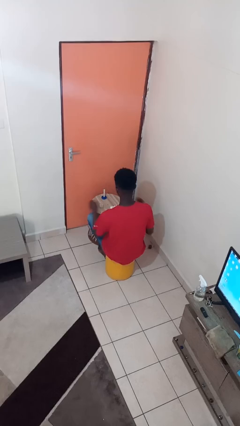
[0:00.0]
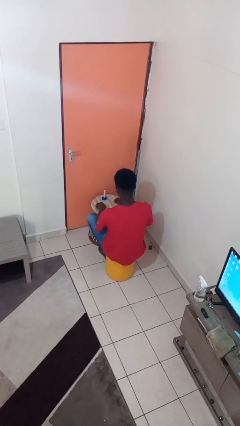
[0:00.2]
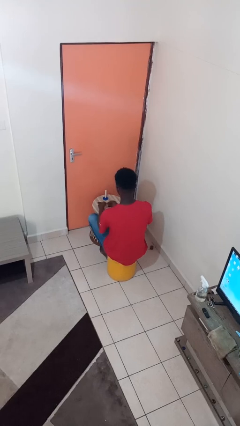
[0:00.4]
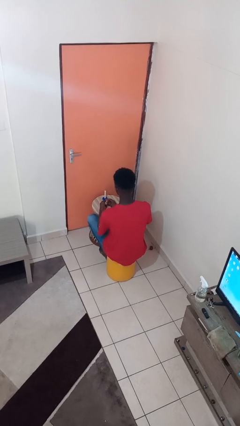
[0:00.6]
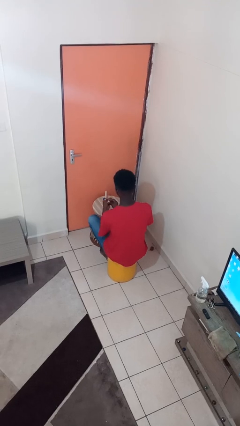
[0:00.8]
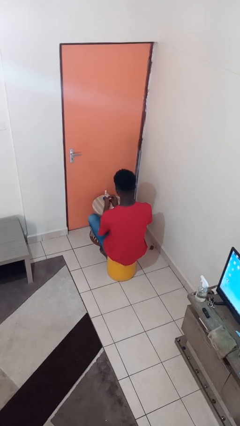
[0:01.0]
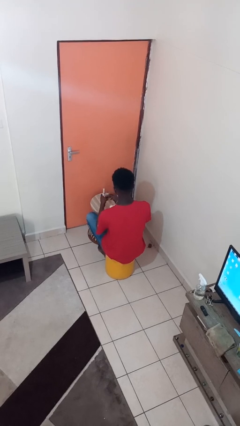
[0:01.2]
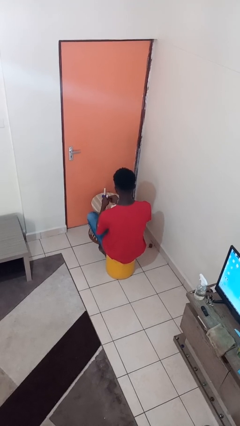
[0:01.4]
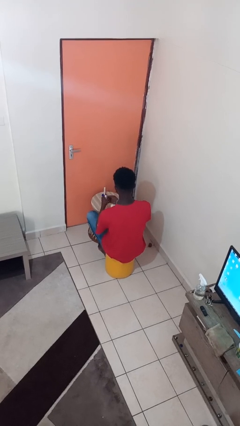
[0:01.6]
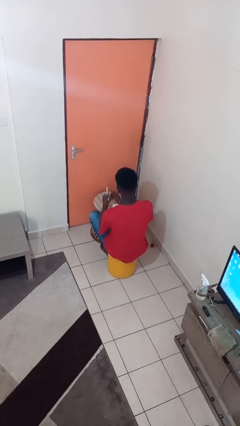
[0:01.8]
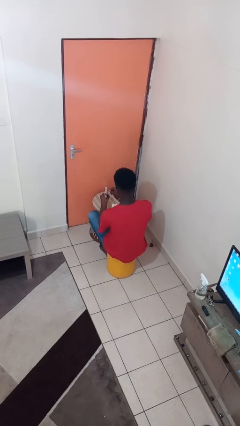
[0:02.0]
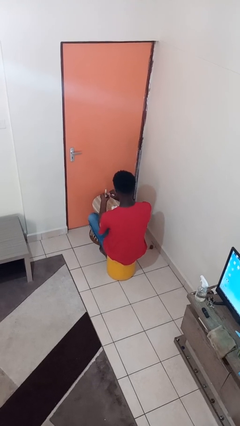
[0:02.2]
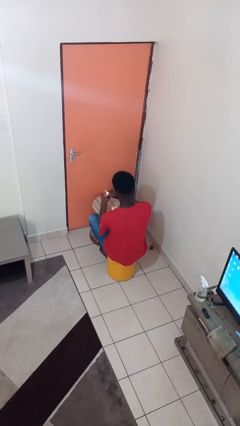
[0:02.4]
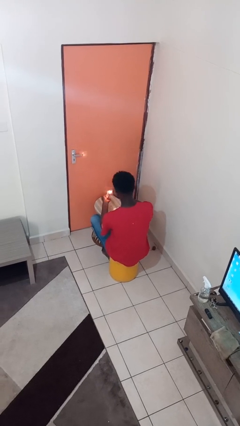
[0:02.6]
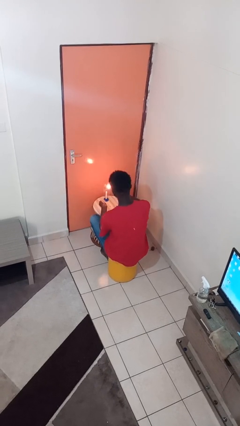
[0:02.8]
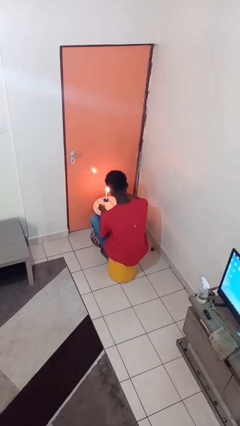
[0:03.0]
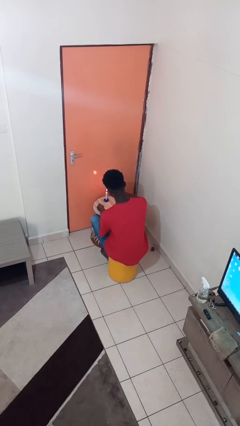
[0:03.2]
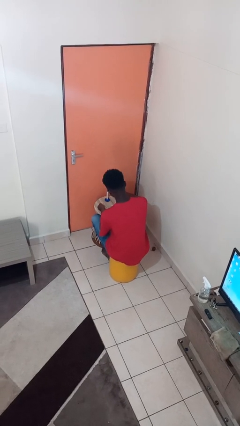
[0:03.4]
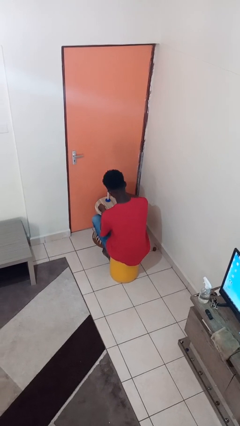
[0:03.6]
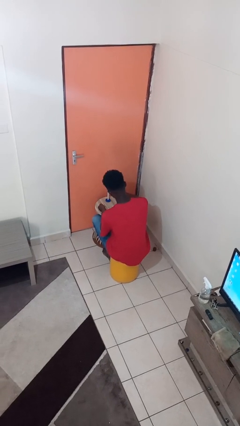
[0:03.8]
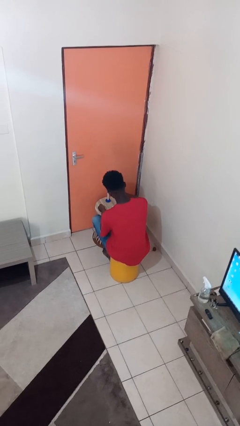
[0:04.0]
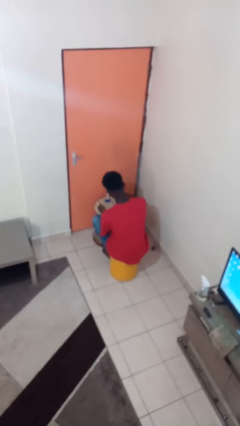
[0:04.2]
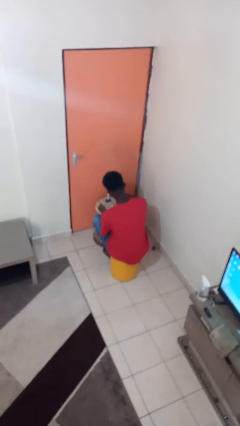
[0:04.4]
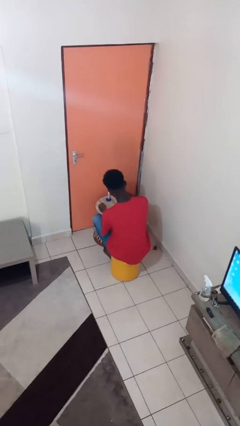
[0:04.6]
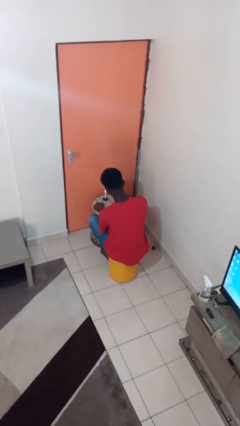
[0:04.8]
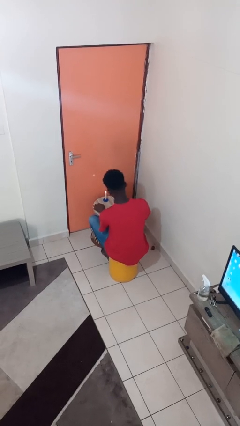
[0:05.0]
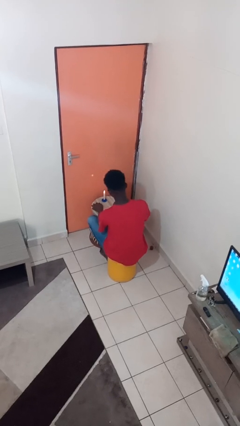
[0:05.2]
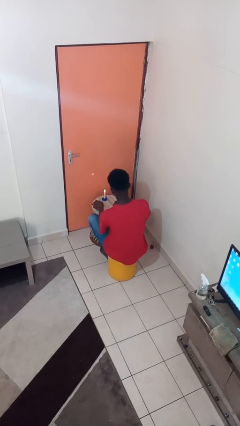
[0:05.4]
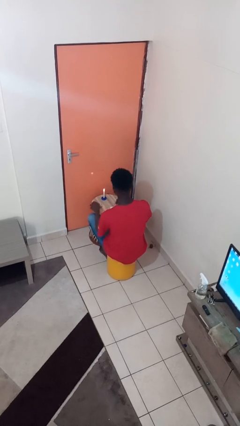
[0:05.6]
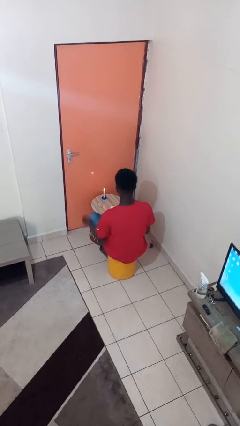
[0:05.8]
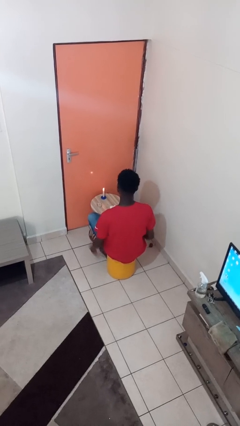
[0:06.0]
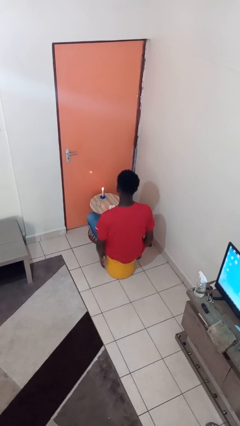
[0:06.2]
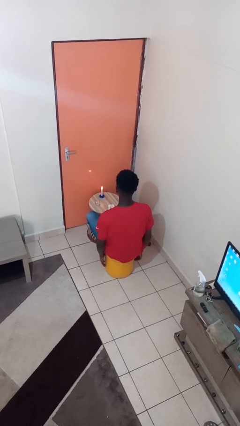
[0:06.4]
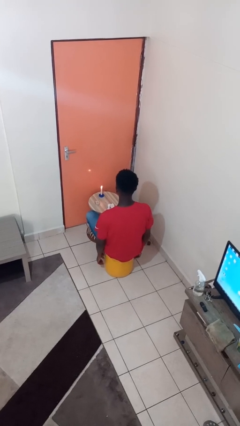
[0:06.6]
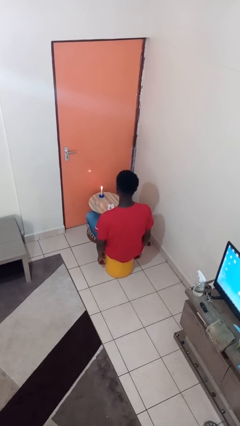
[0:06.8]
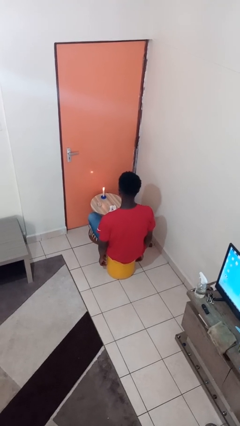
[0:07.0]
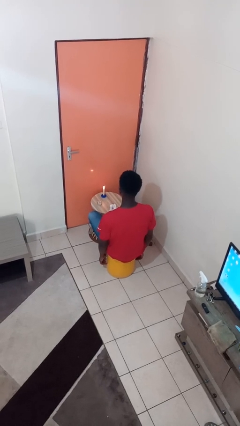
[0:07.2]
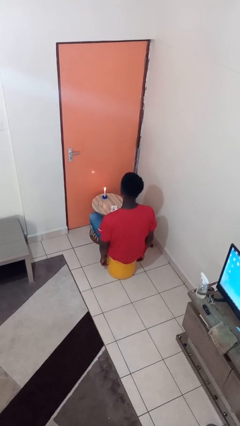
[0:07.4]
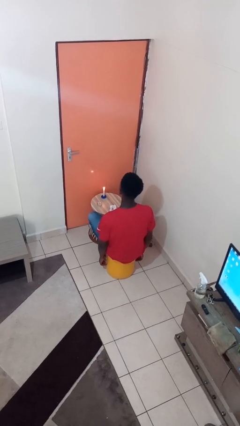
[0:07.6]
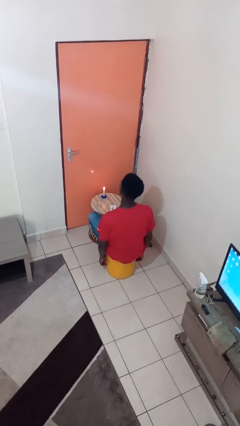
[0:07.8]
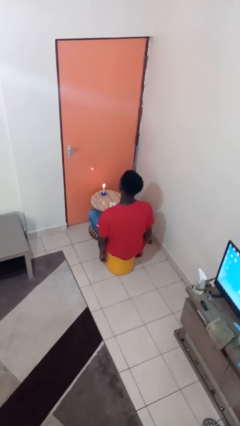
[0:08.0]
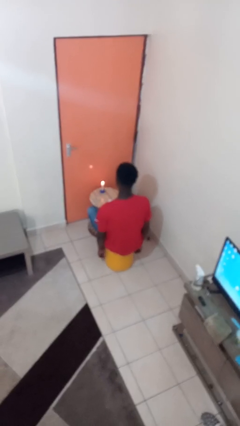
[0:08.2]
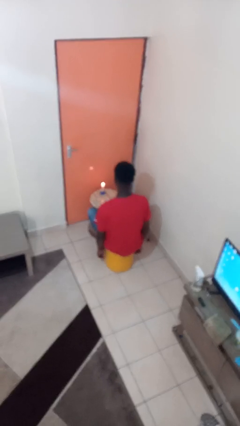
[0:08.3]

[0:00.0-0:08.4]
person lights candle

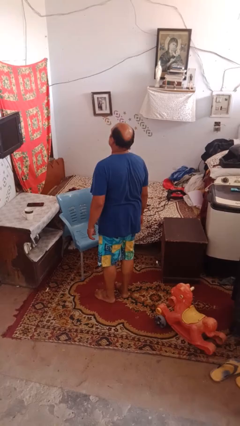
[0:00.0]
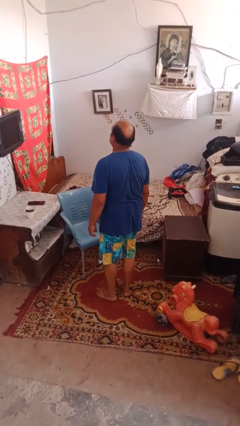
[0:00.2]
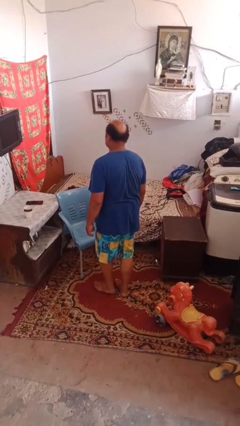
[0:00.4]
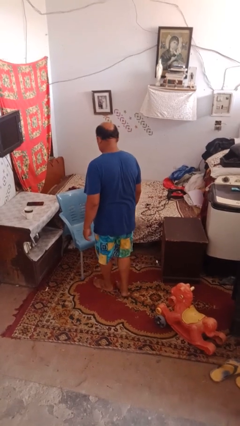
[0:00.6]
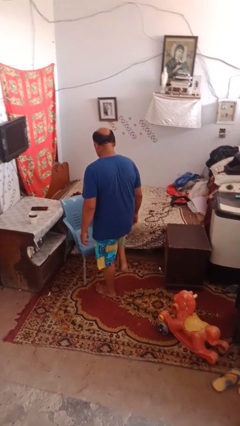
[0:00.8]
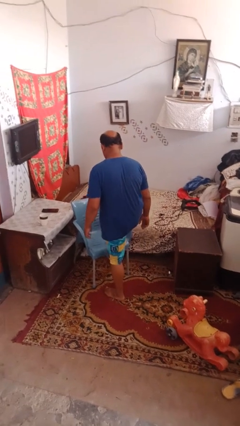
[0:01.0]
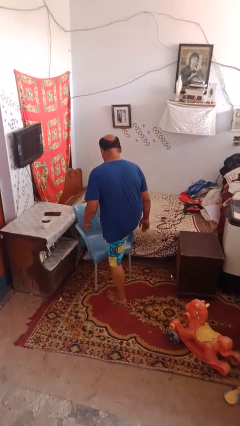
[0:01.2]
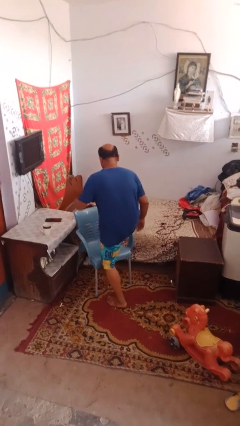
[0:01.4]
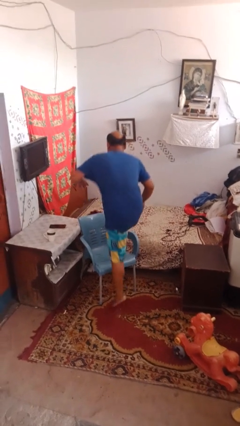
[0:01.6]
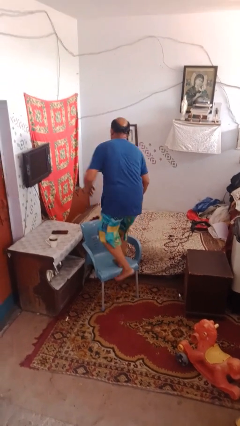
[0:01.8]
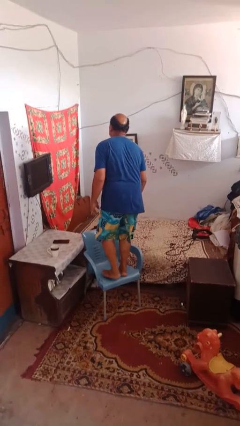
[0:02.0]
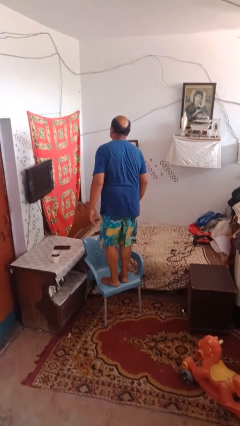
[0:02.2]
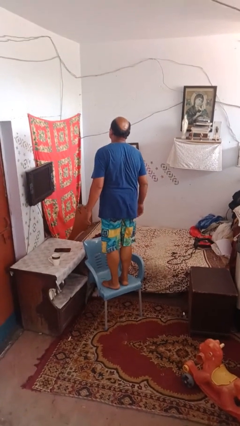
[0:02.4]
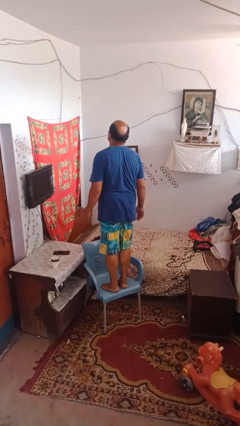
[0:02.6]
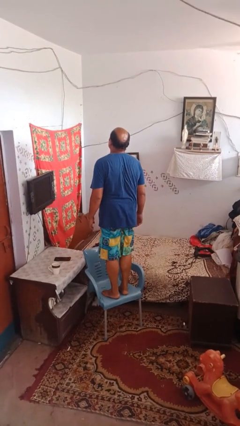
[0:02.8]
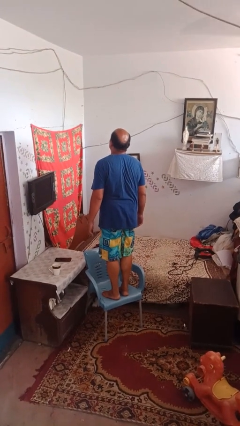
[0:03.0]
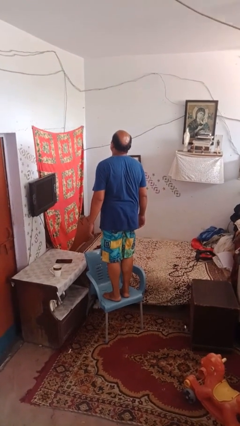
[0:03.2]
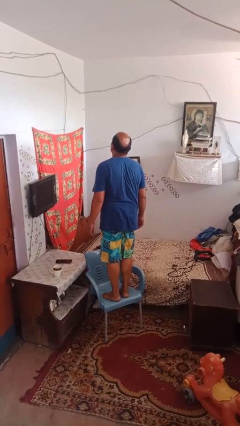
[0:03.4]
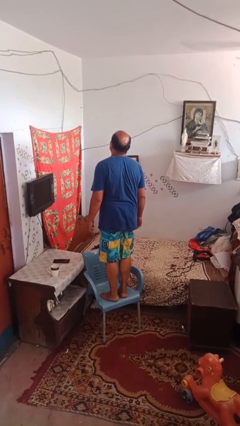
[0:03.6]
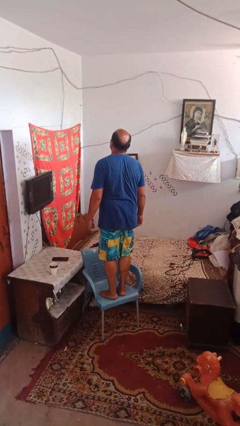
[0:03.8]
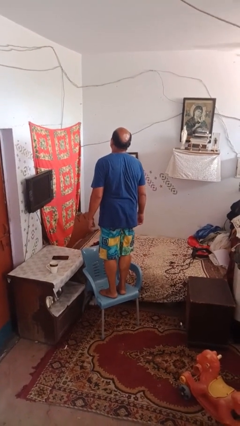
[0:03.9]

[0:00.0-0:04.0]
person climbs on chair

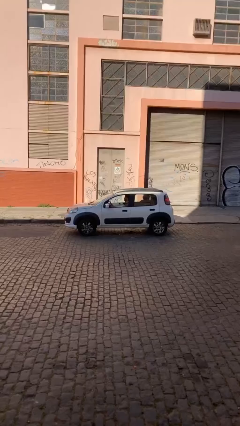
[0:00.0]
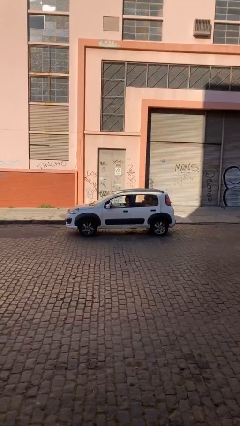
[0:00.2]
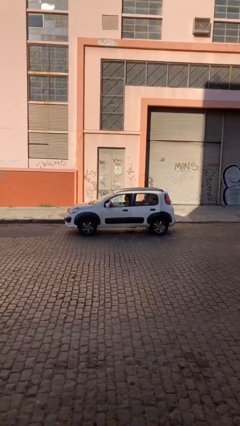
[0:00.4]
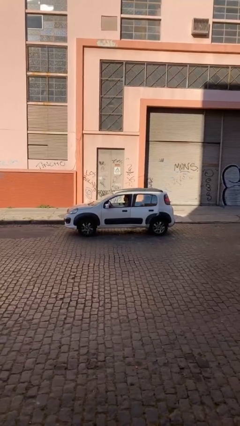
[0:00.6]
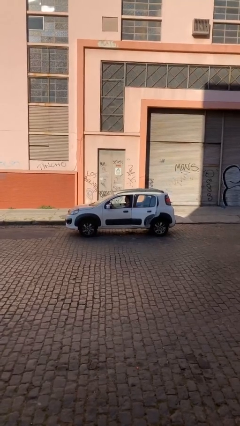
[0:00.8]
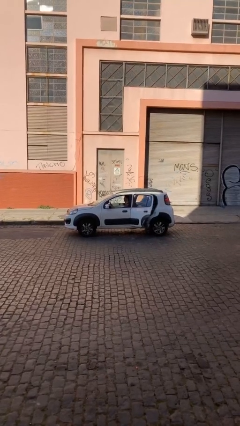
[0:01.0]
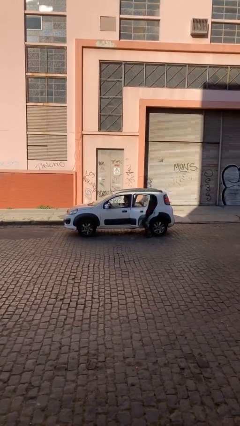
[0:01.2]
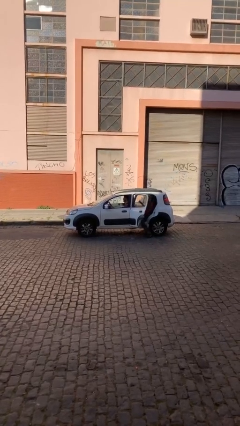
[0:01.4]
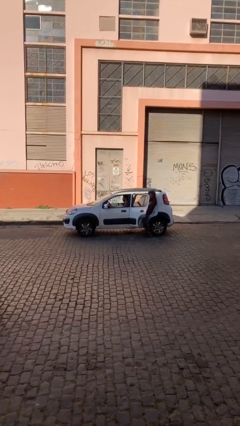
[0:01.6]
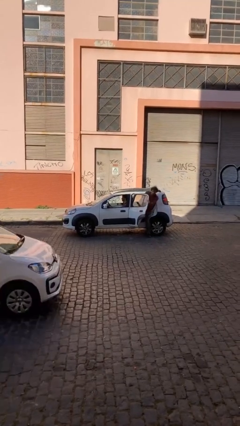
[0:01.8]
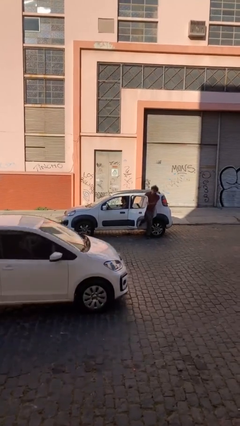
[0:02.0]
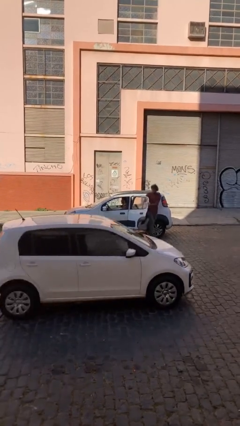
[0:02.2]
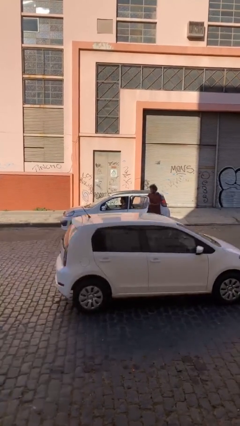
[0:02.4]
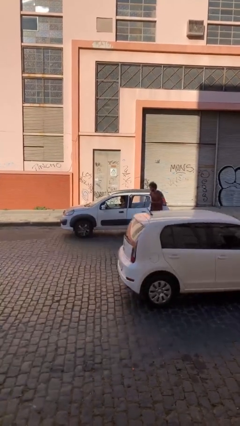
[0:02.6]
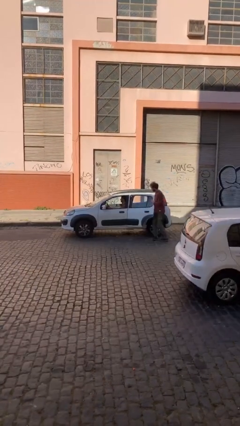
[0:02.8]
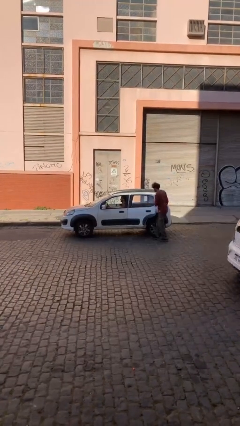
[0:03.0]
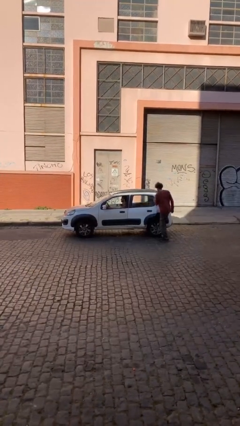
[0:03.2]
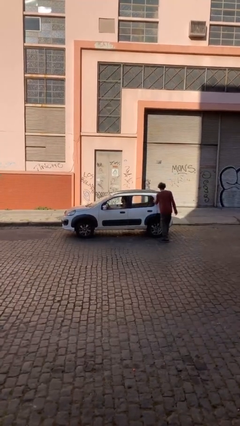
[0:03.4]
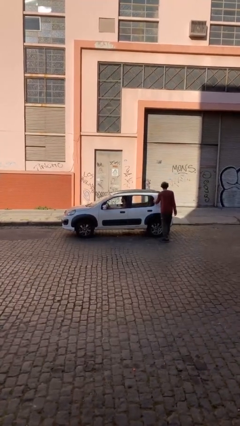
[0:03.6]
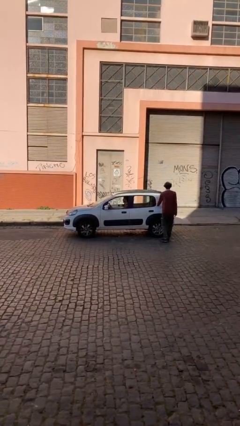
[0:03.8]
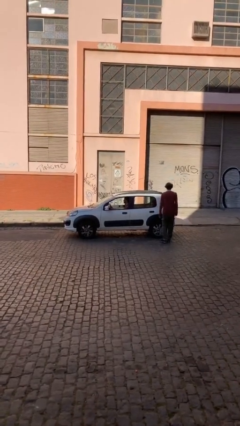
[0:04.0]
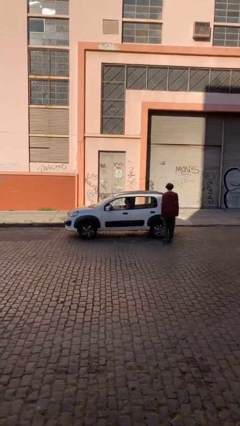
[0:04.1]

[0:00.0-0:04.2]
car drops off person

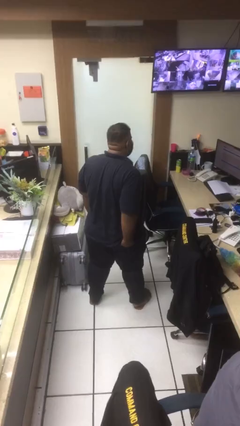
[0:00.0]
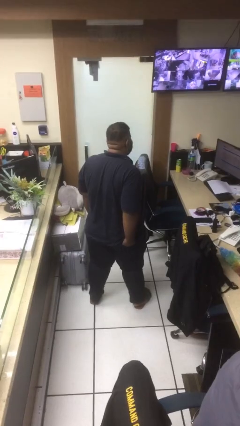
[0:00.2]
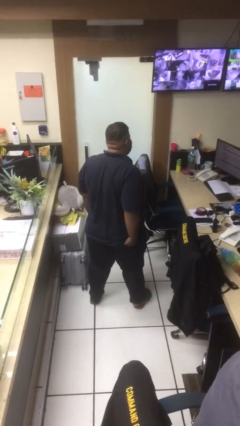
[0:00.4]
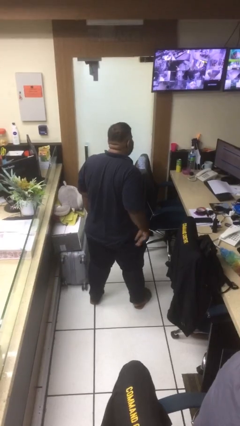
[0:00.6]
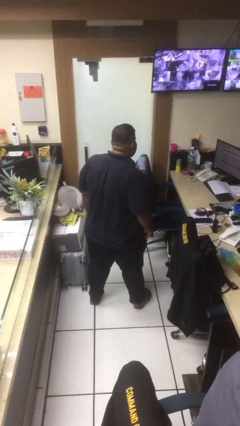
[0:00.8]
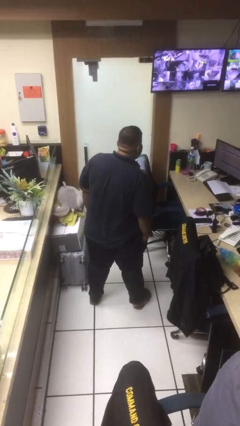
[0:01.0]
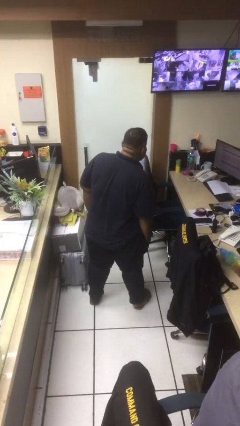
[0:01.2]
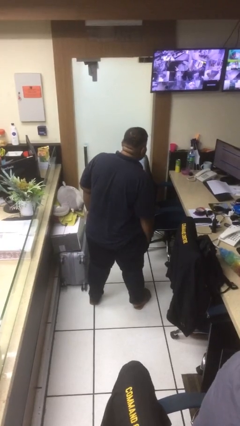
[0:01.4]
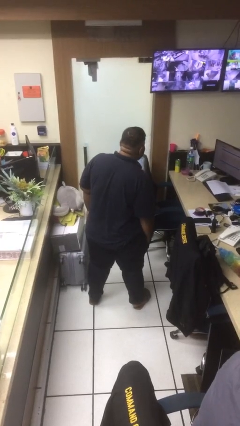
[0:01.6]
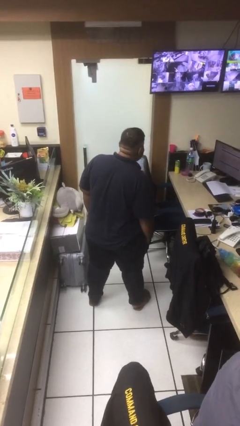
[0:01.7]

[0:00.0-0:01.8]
person puts hands in back pockets
